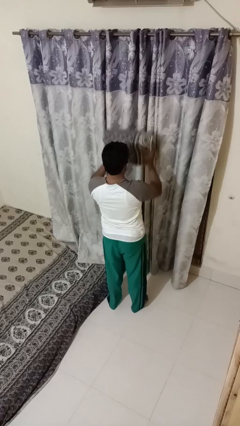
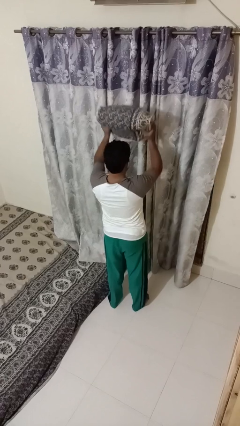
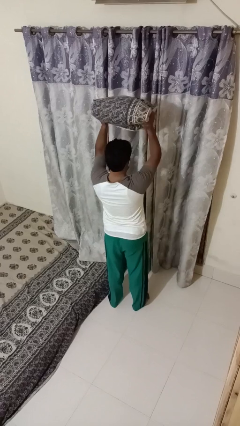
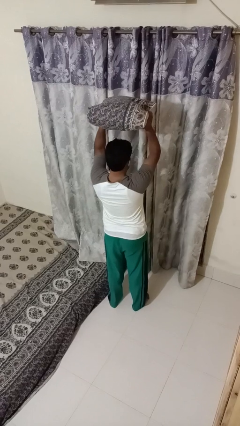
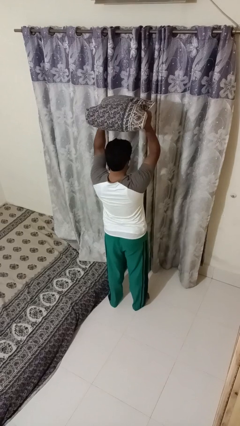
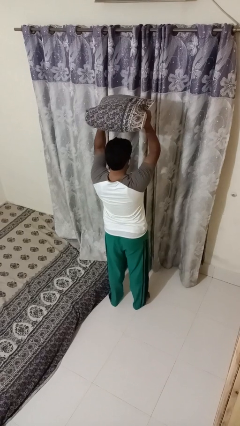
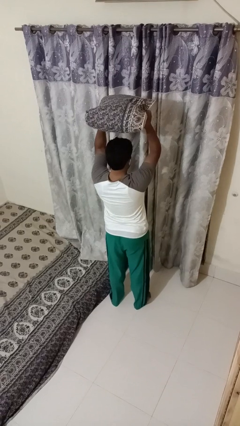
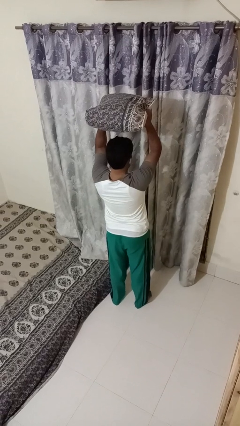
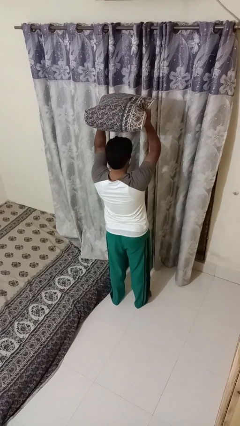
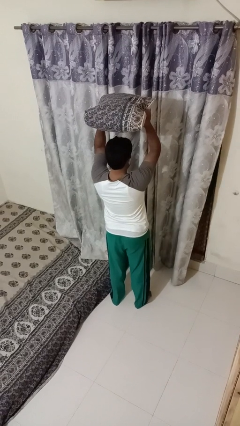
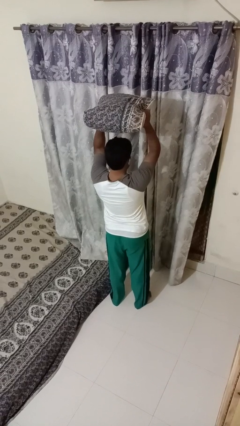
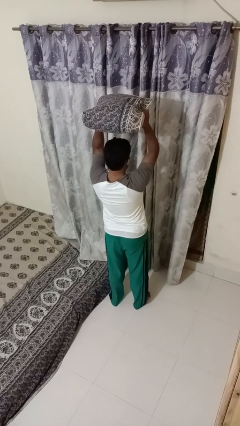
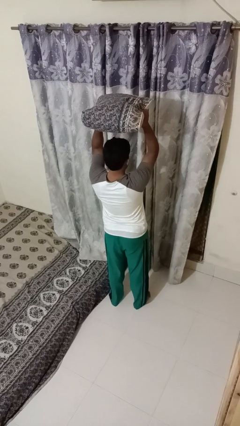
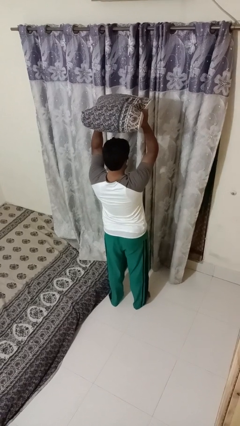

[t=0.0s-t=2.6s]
person holds object above head

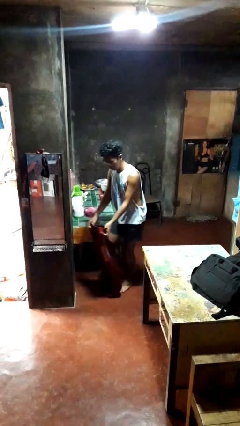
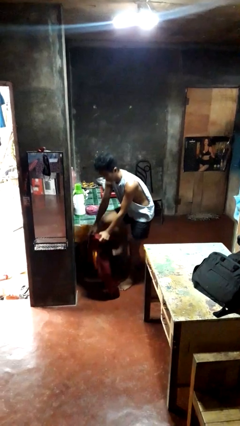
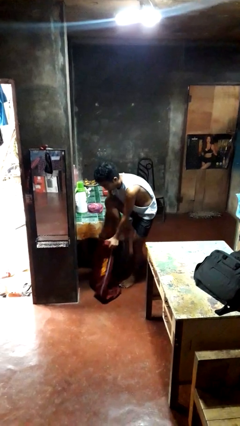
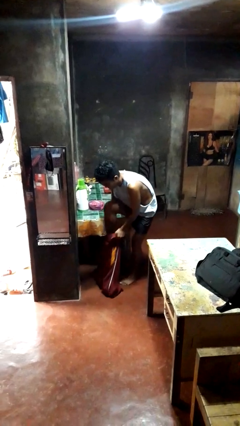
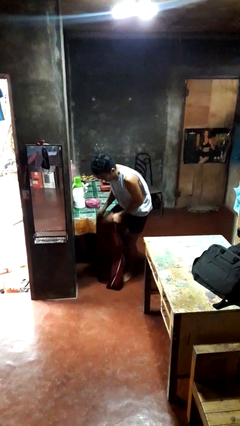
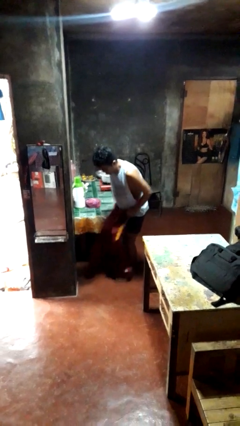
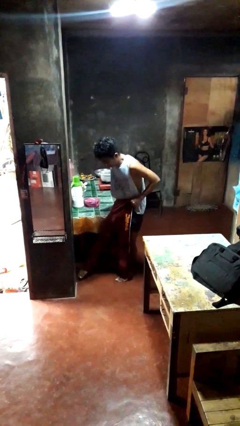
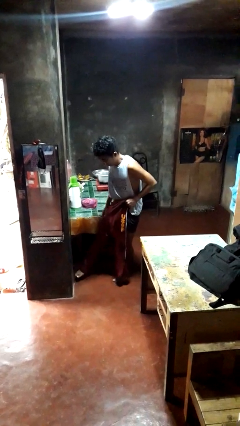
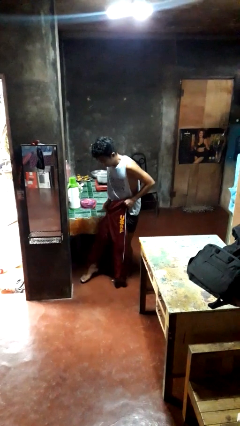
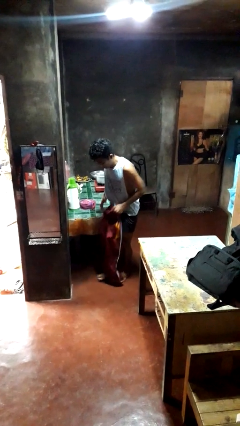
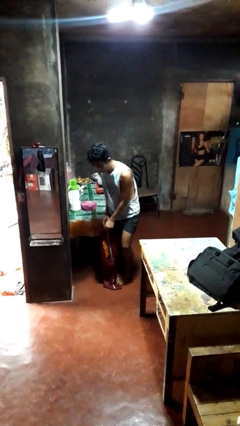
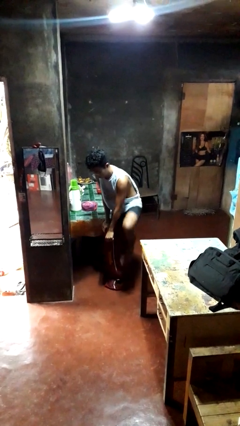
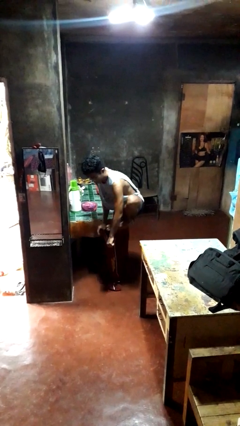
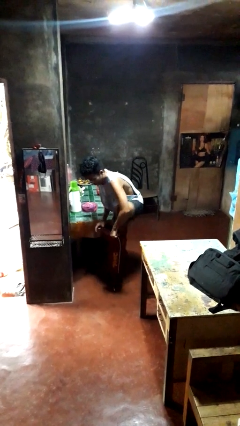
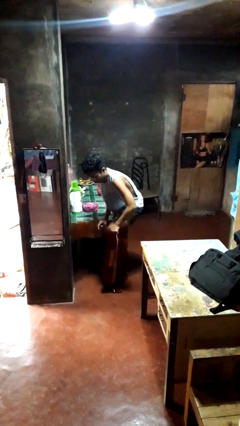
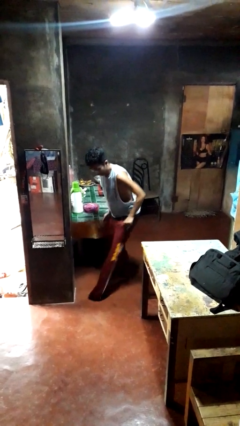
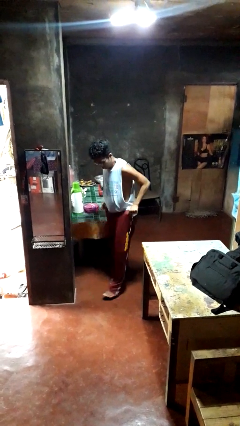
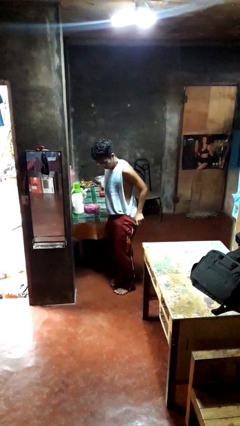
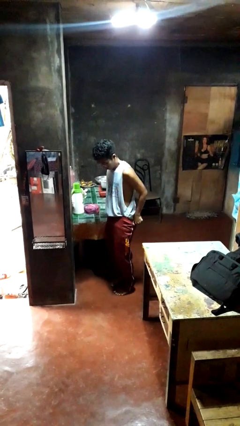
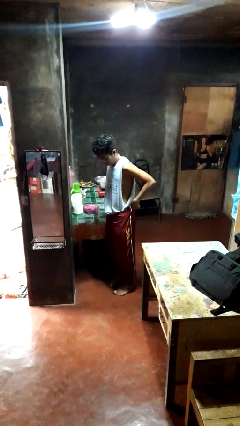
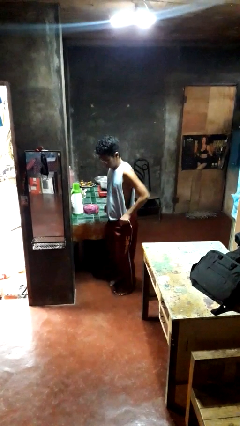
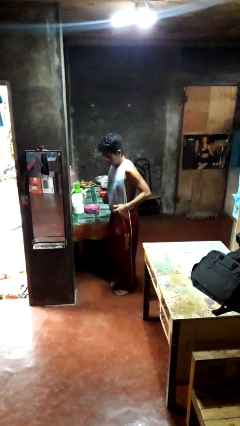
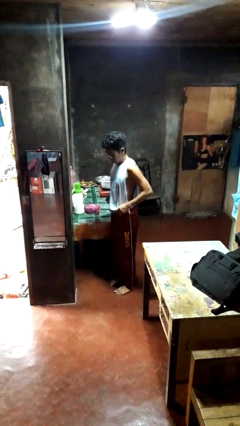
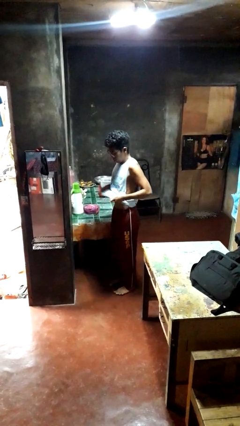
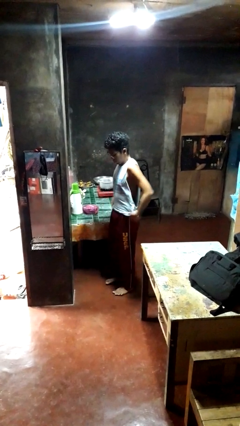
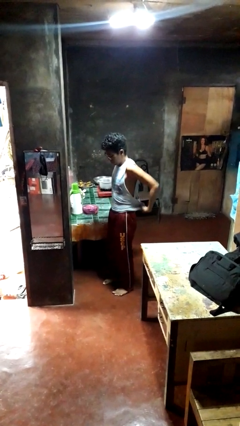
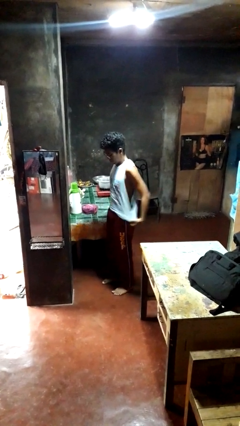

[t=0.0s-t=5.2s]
person puts on pants

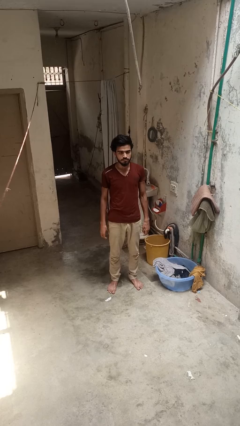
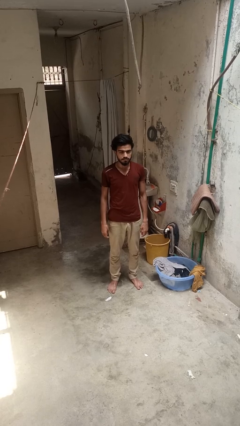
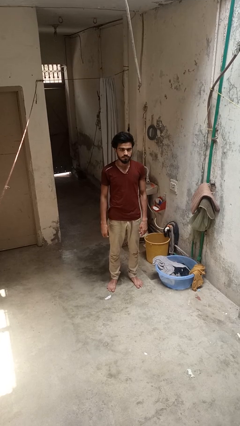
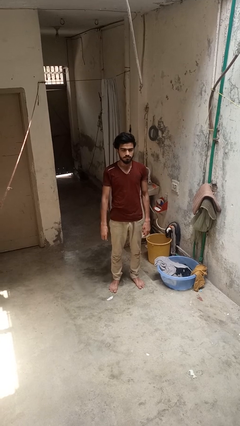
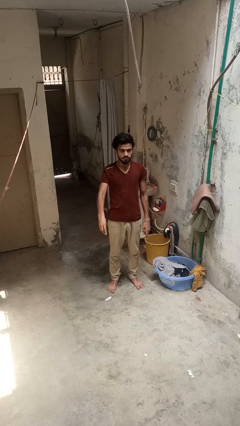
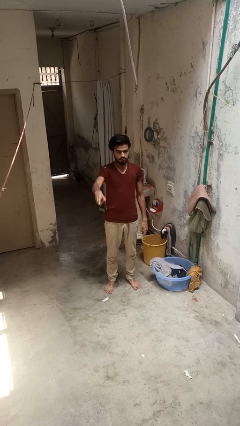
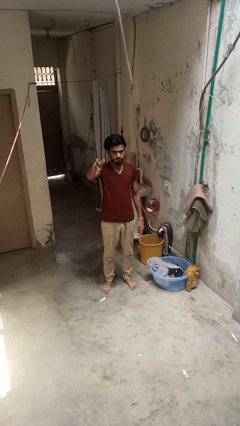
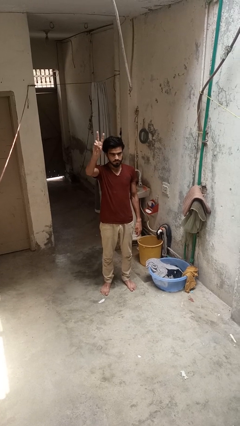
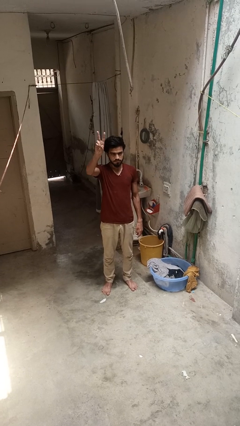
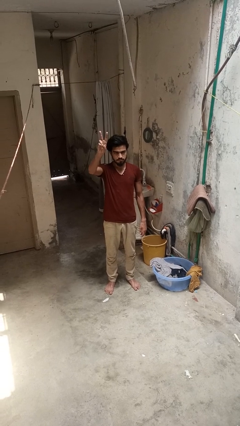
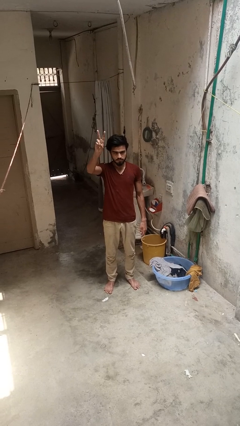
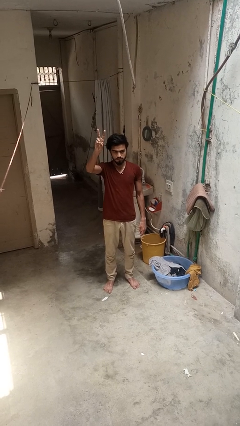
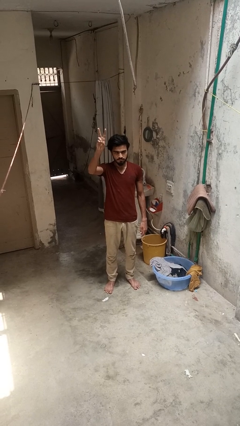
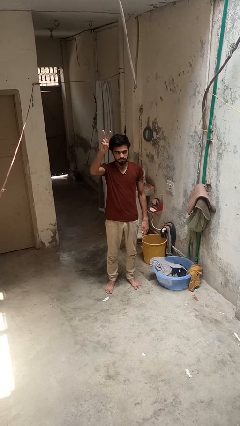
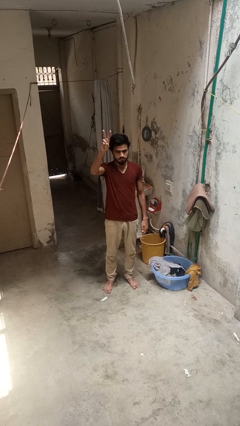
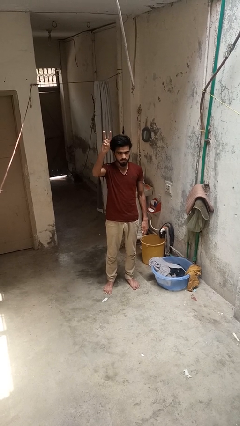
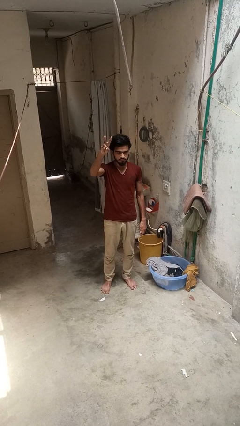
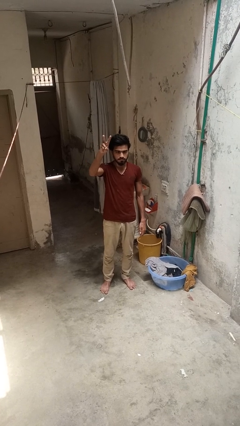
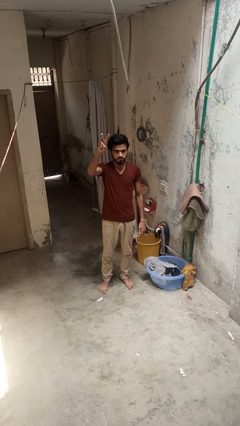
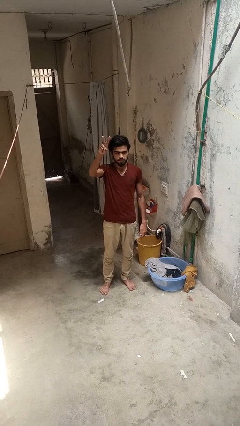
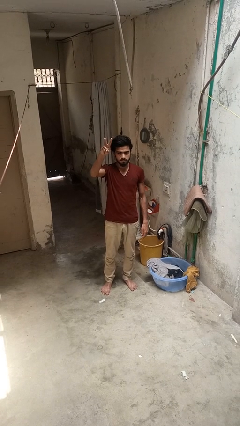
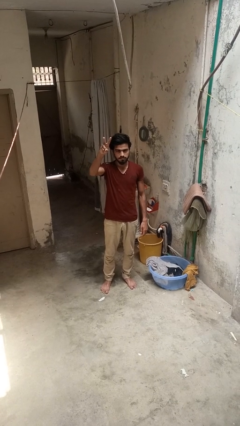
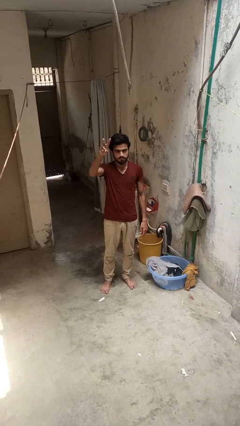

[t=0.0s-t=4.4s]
person gestures peace

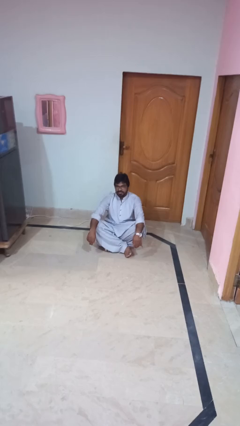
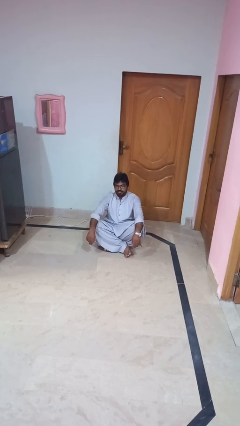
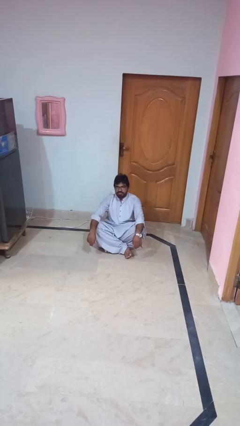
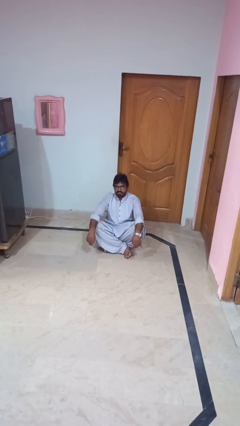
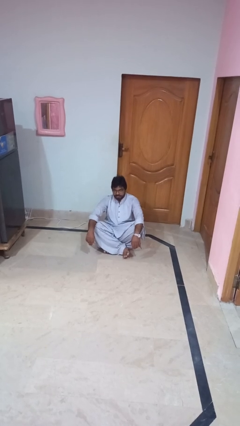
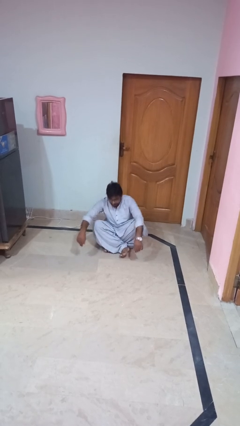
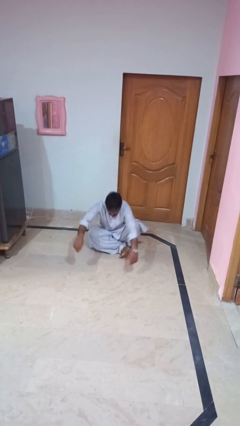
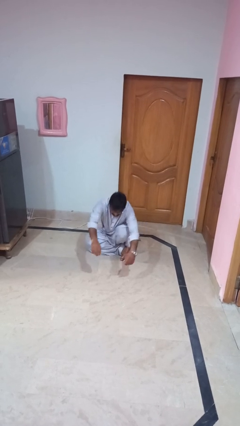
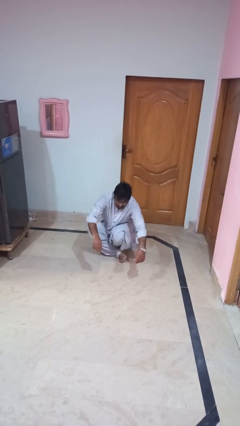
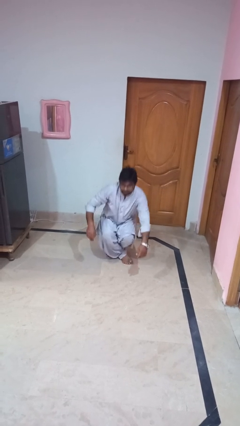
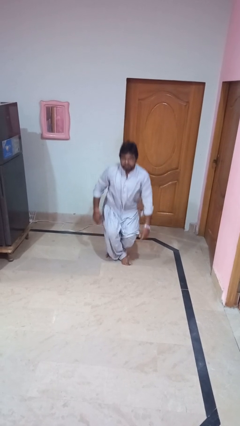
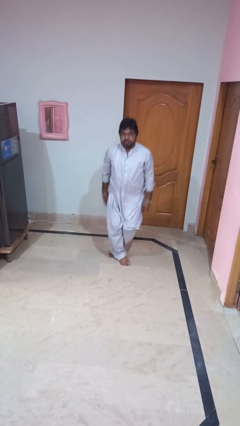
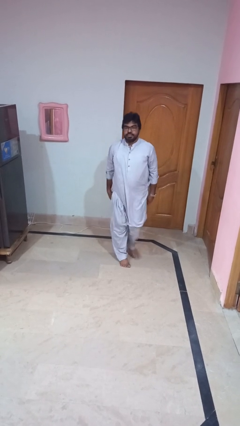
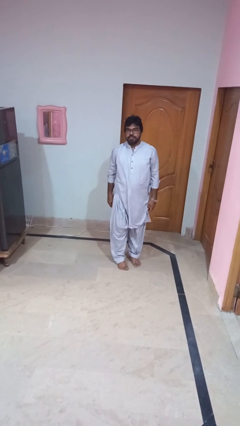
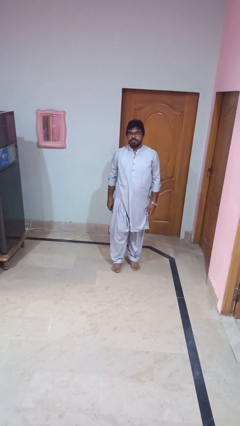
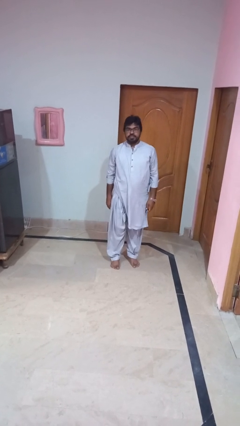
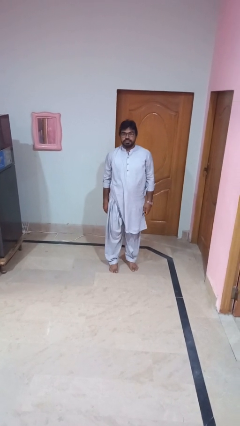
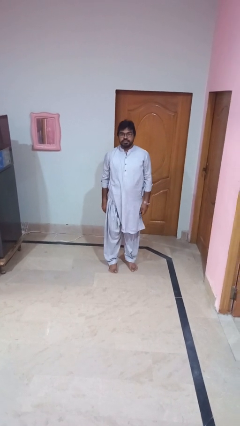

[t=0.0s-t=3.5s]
person stands up from floor

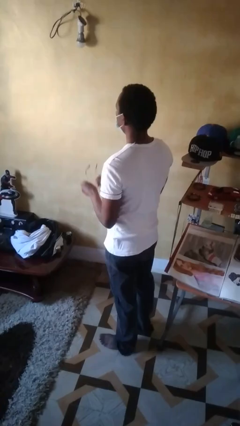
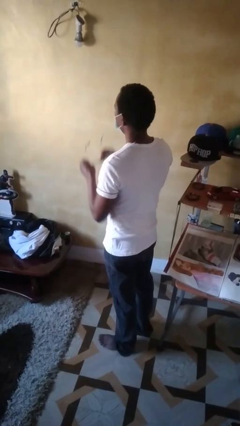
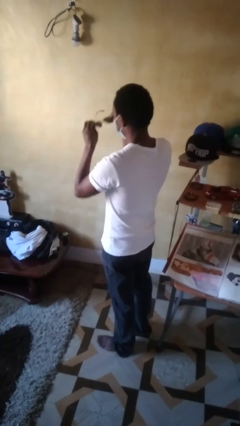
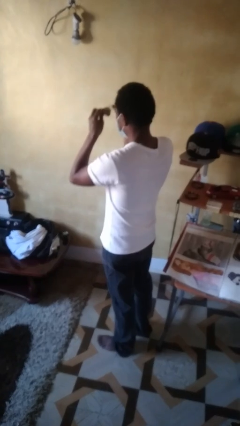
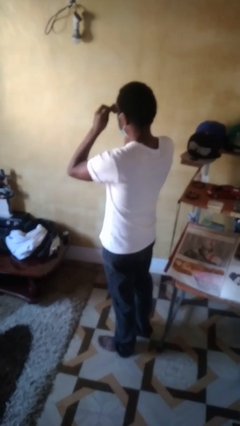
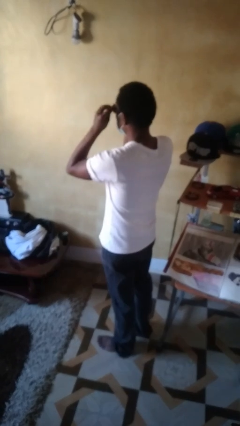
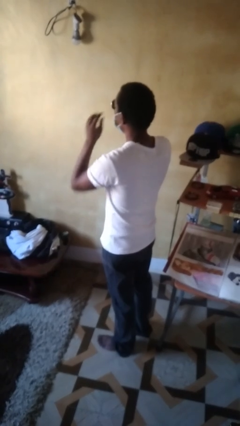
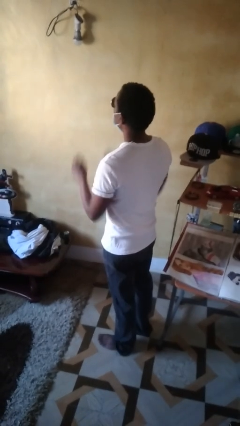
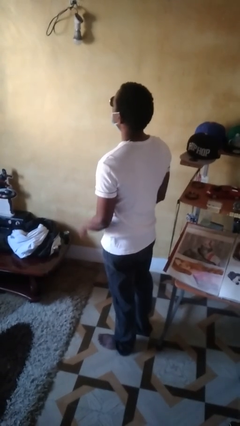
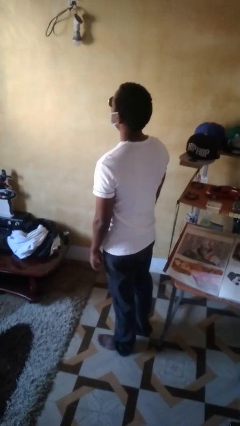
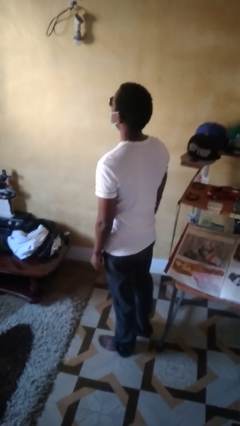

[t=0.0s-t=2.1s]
person puts on sunglasses
